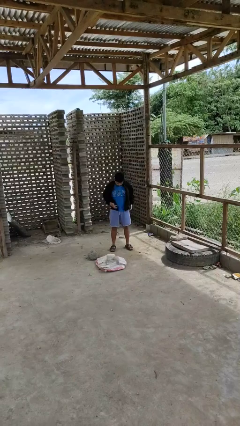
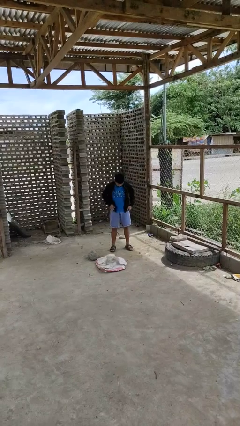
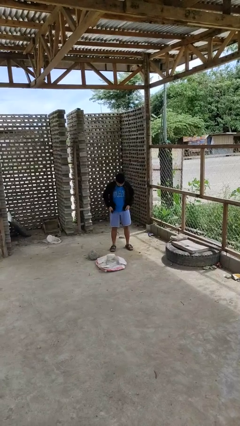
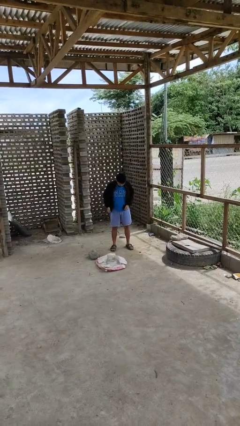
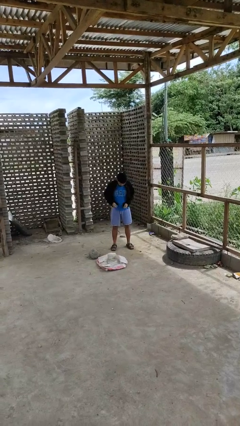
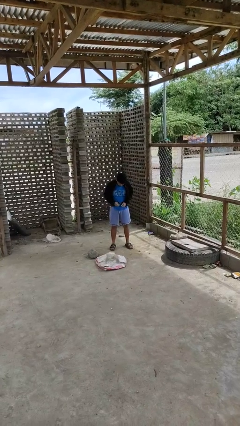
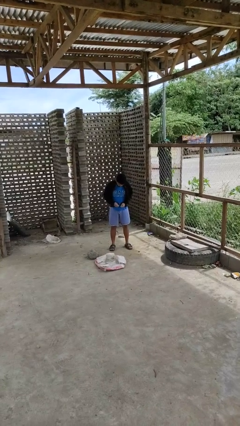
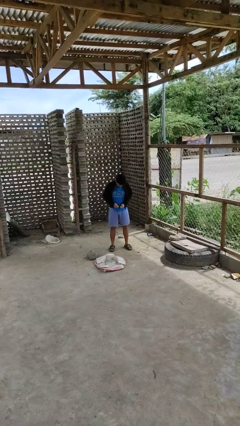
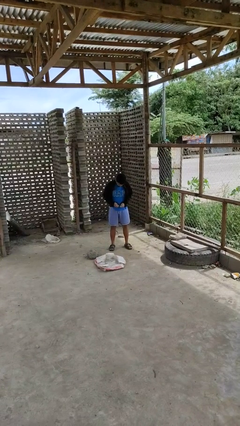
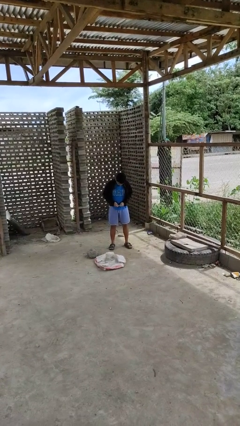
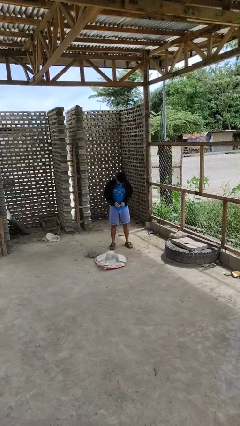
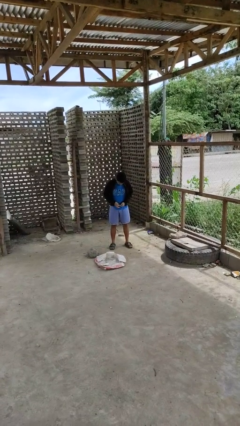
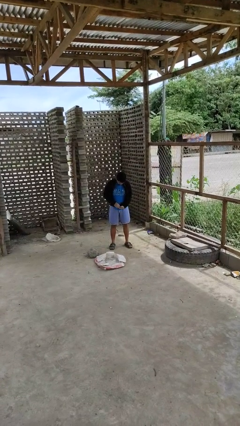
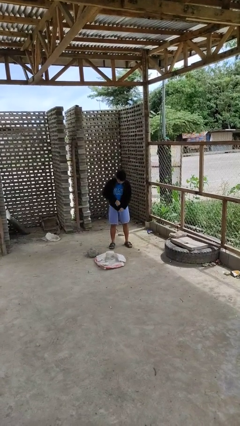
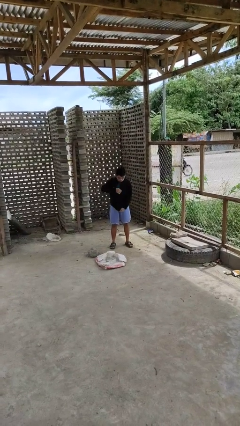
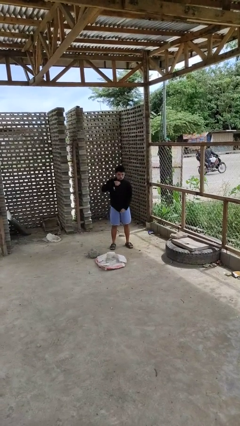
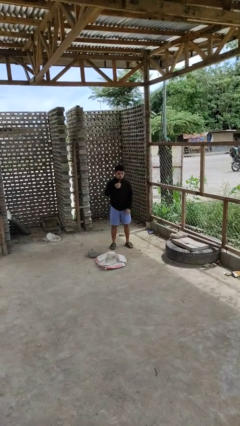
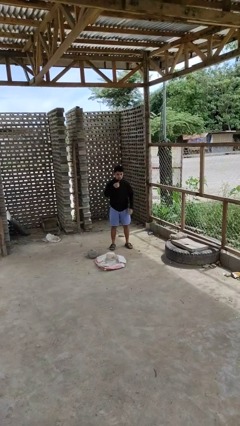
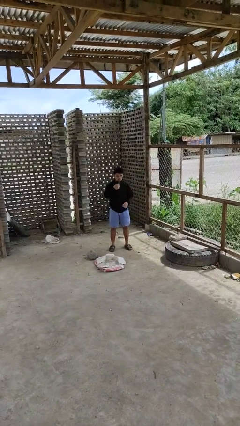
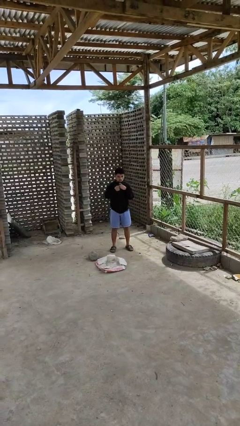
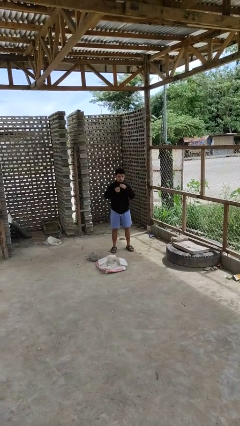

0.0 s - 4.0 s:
person zips up jacket

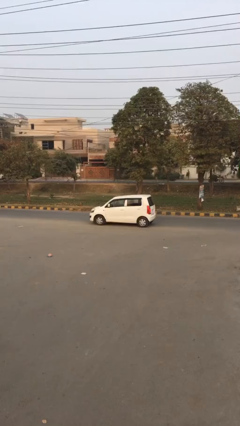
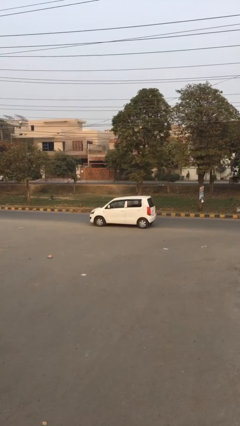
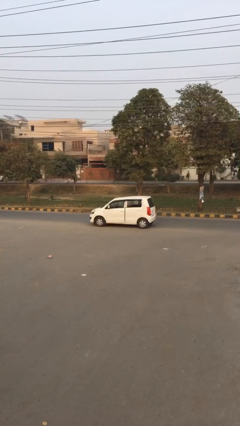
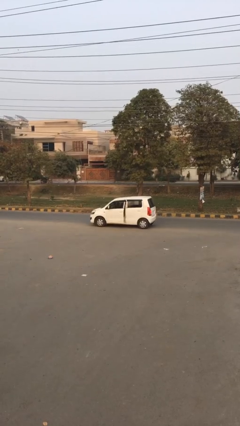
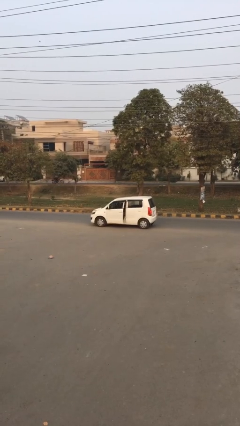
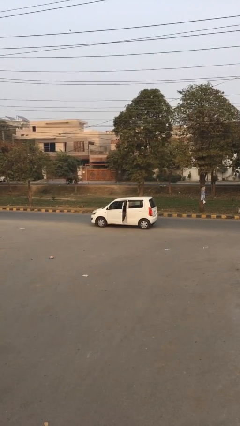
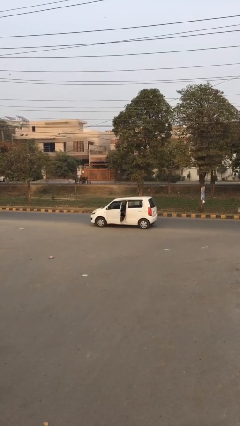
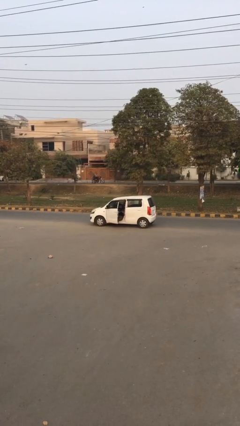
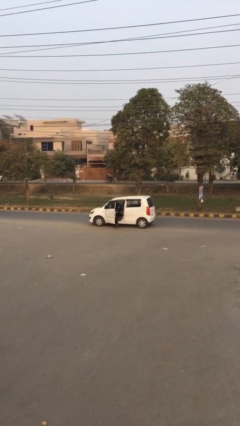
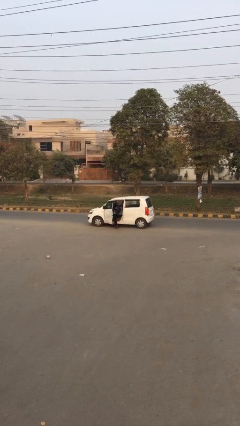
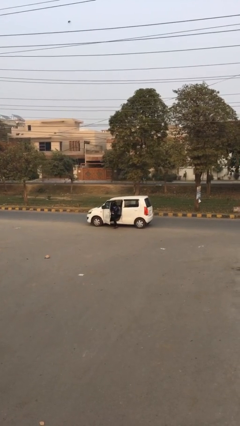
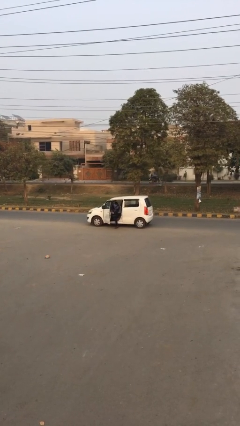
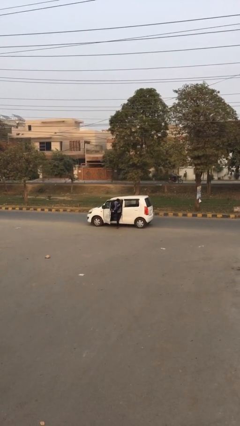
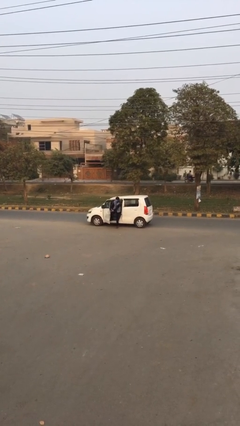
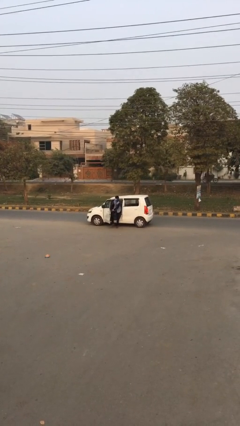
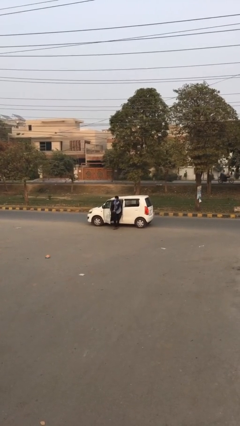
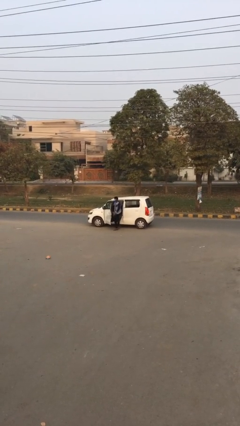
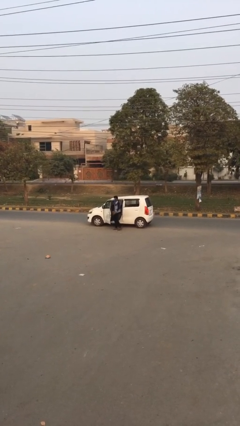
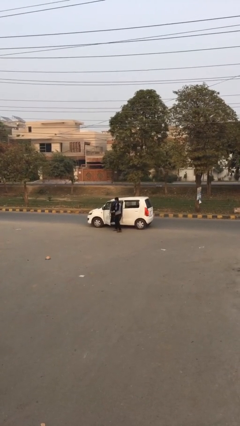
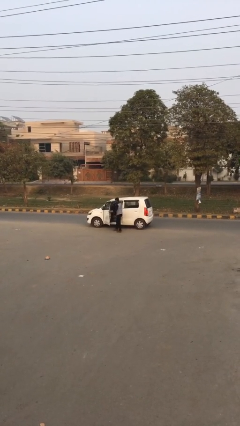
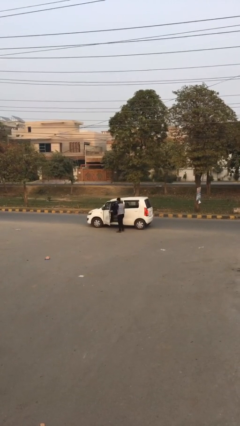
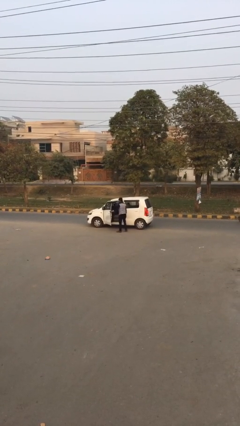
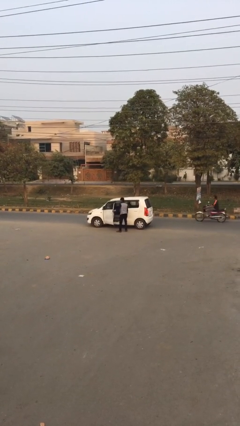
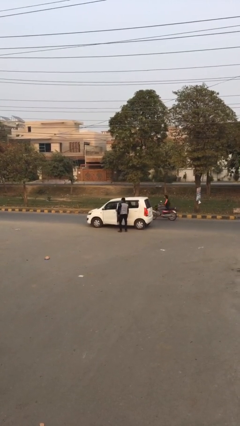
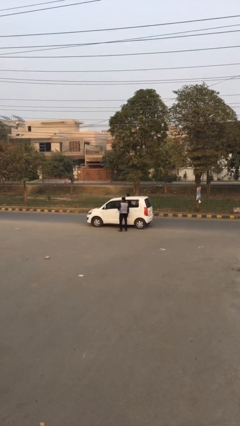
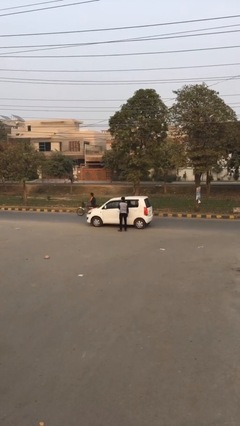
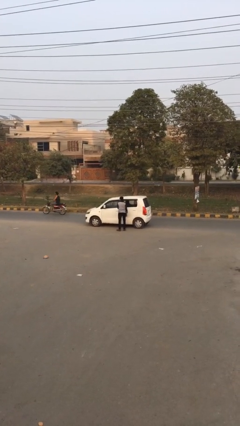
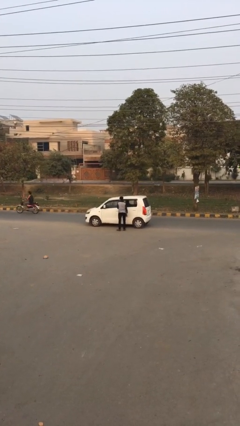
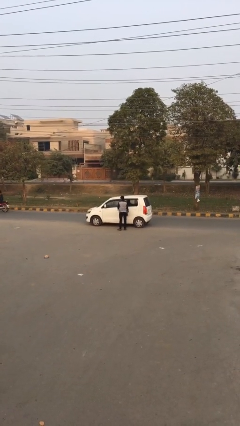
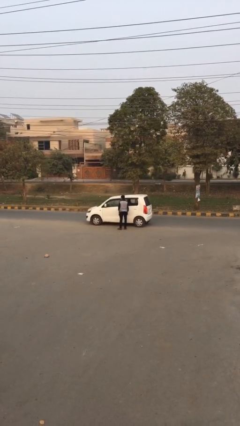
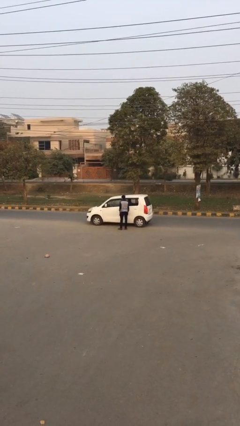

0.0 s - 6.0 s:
car drops off person

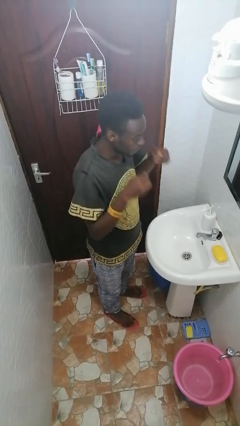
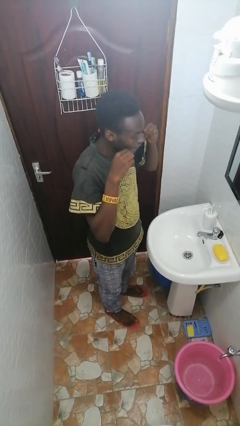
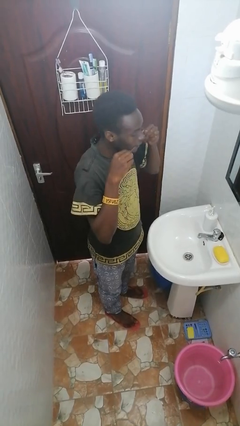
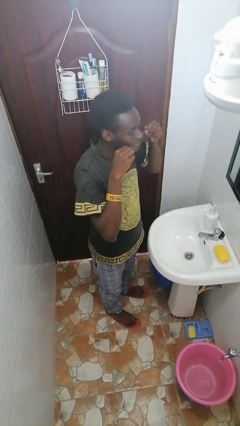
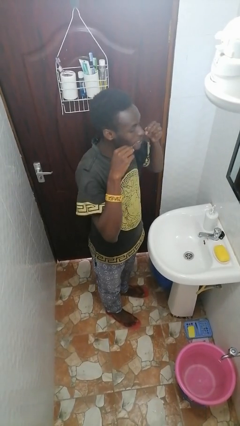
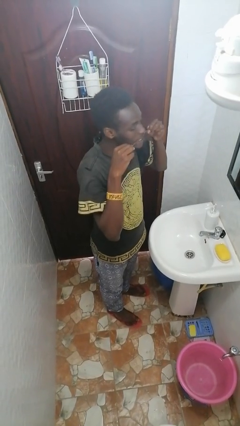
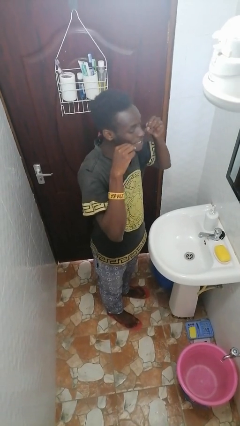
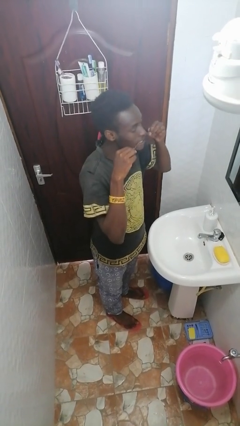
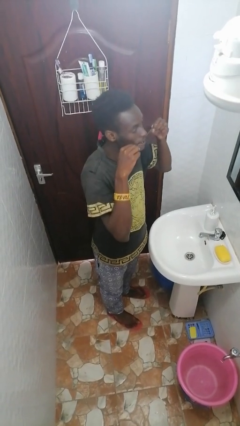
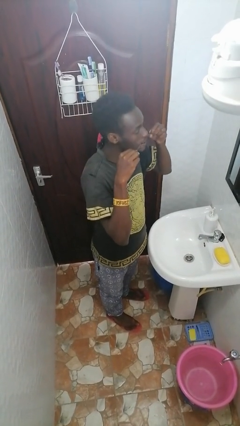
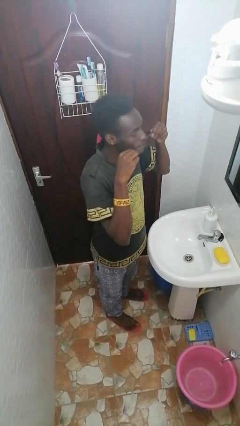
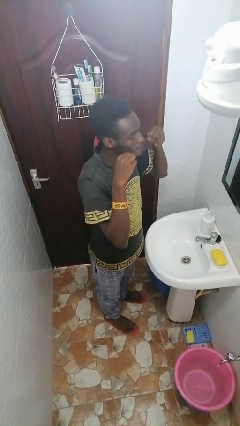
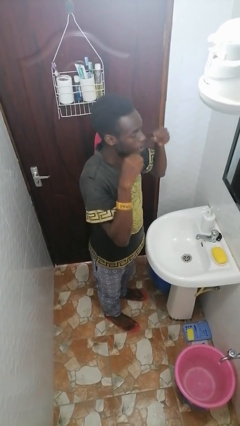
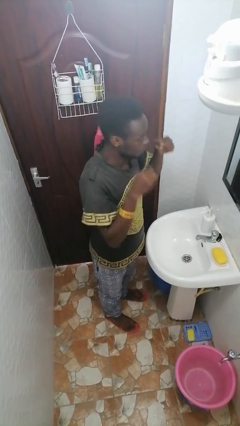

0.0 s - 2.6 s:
person flosses

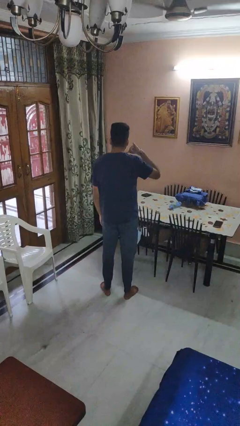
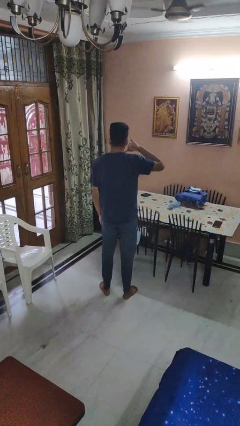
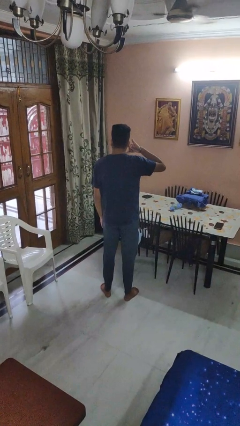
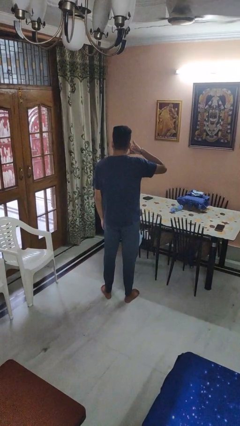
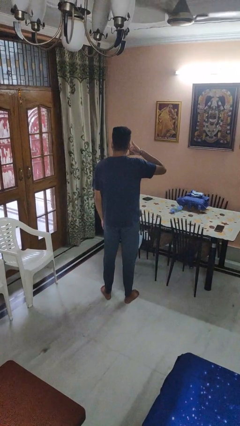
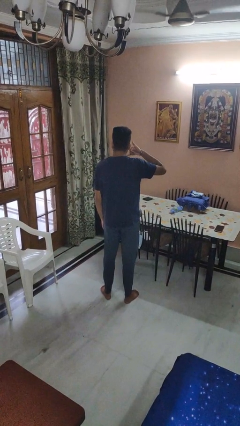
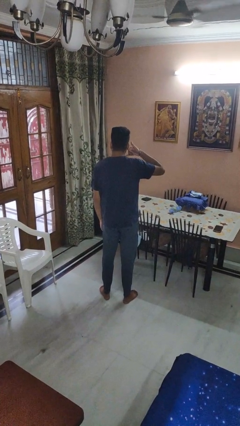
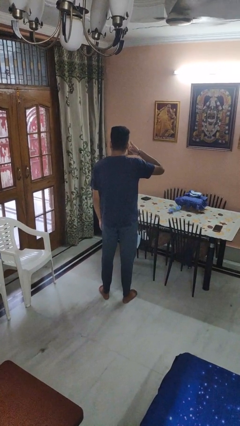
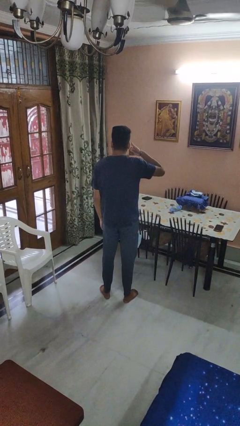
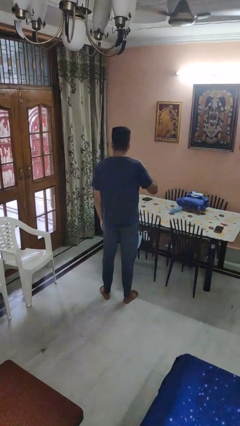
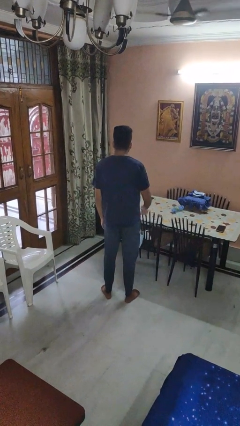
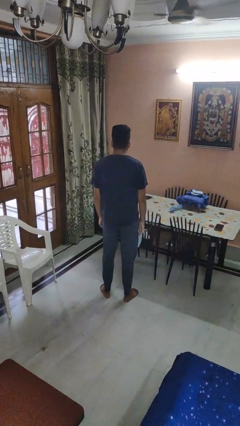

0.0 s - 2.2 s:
person gestures call me

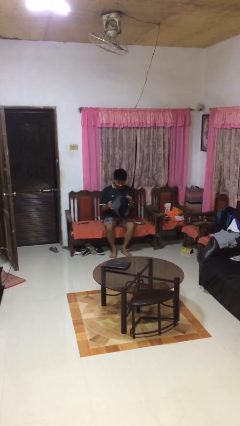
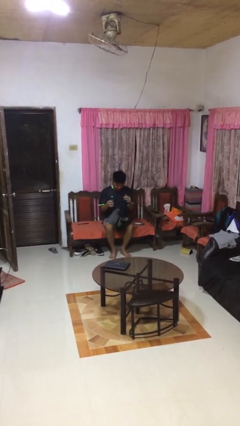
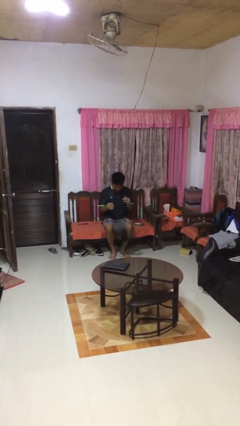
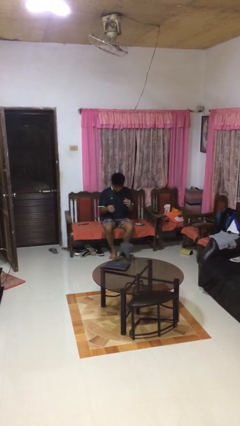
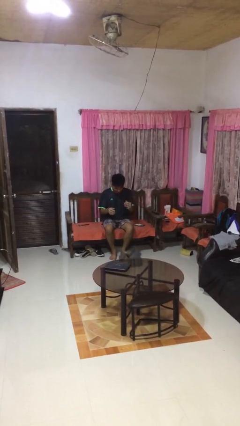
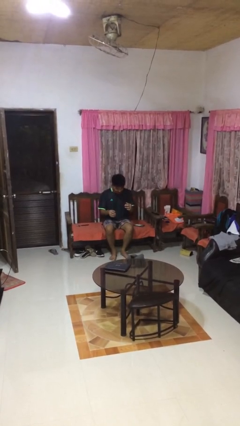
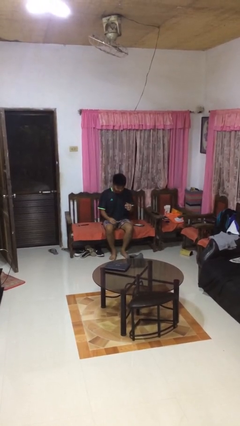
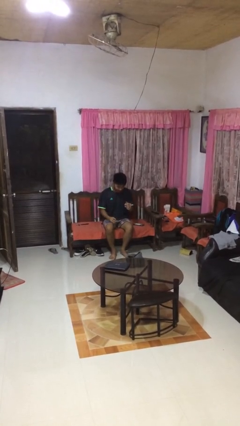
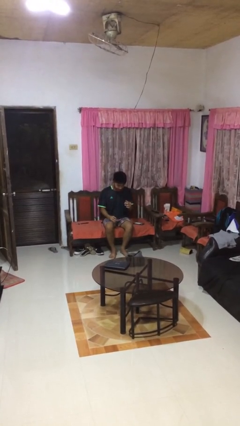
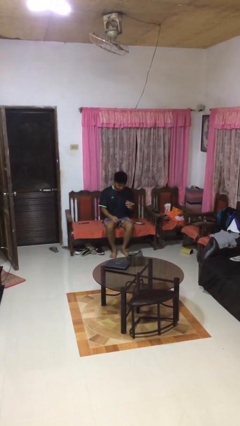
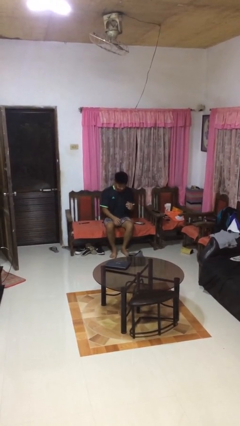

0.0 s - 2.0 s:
person drops object

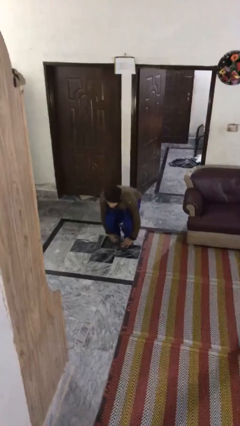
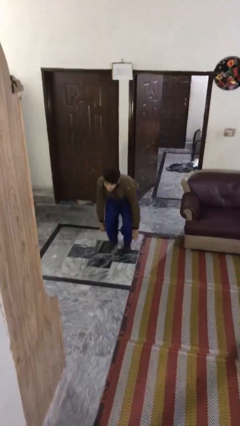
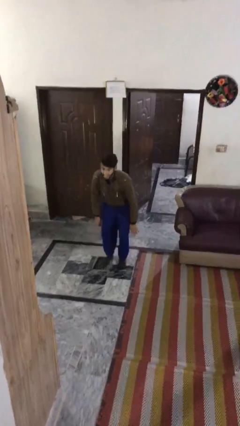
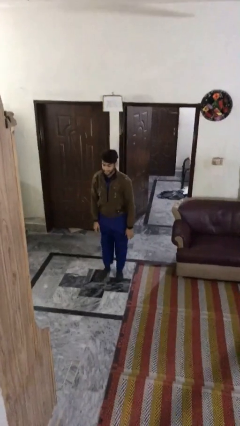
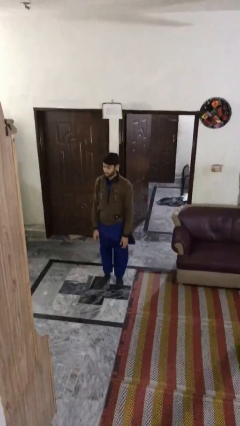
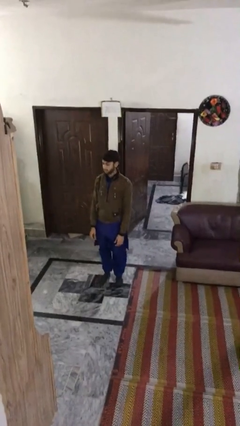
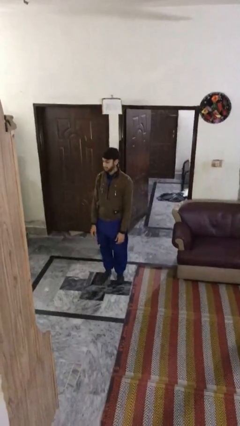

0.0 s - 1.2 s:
person stands up
